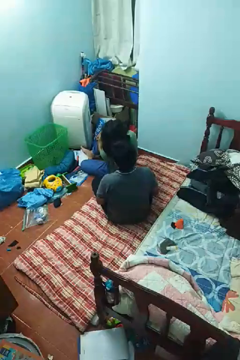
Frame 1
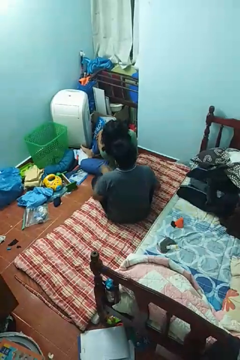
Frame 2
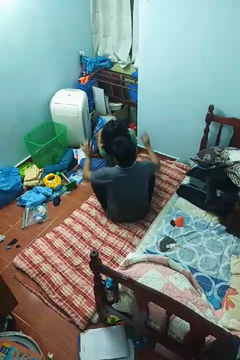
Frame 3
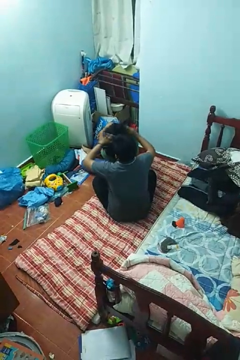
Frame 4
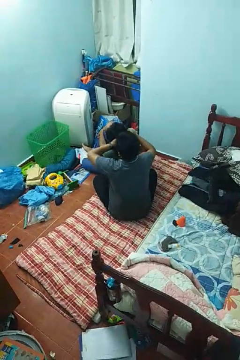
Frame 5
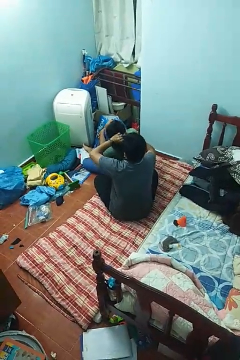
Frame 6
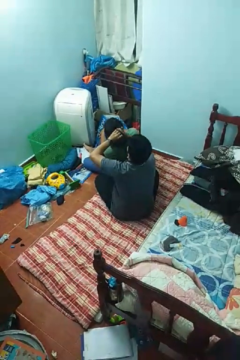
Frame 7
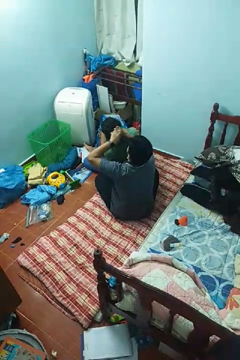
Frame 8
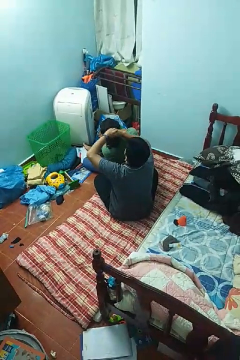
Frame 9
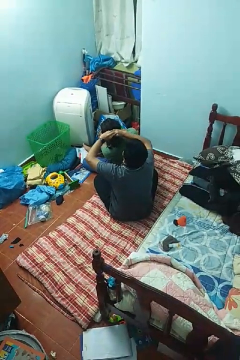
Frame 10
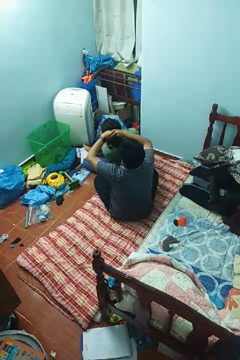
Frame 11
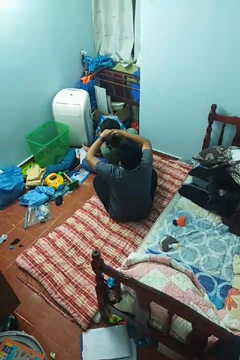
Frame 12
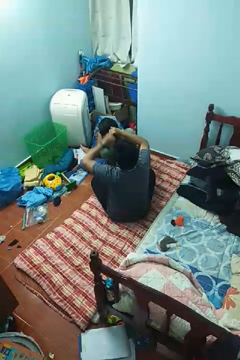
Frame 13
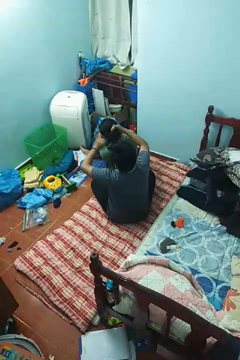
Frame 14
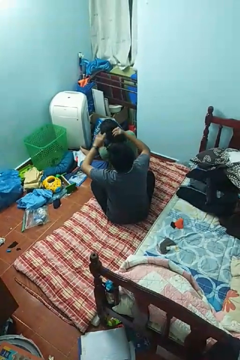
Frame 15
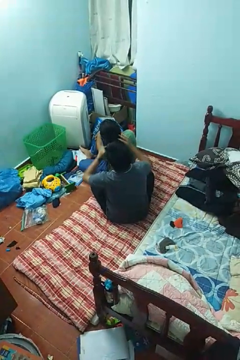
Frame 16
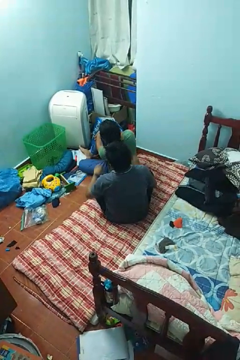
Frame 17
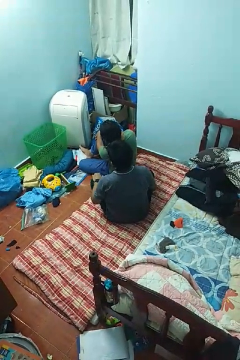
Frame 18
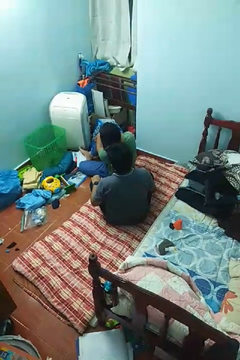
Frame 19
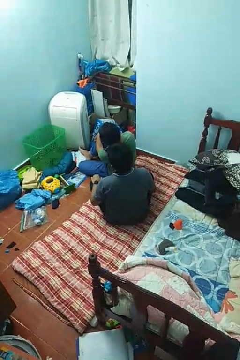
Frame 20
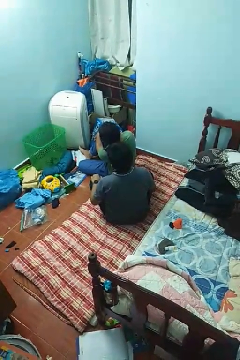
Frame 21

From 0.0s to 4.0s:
person braids hair of person

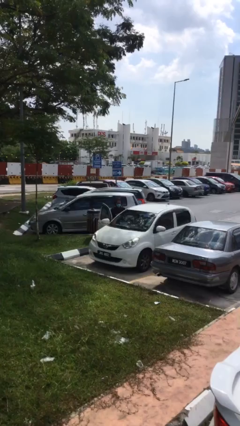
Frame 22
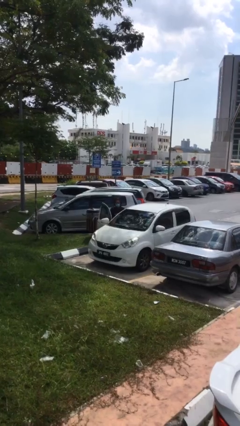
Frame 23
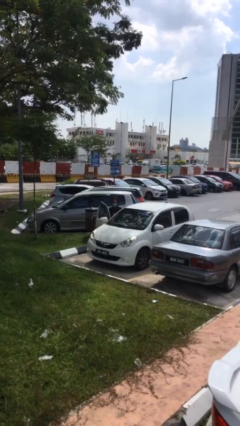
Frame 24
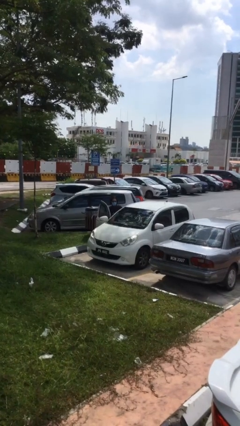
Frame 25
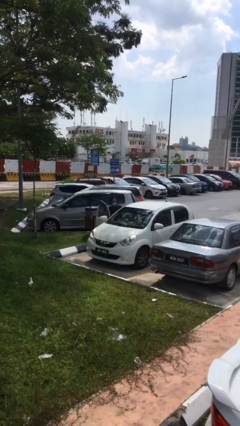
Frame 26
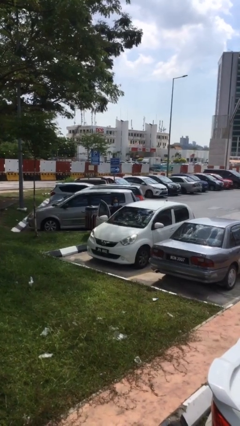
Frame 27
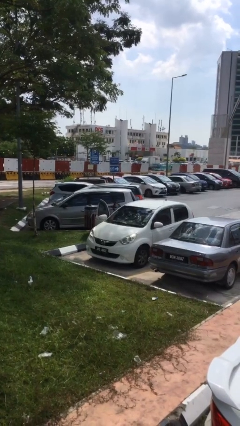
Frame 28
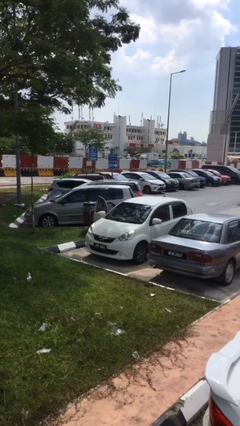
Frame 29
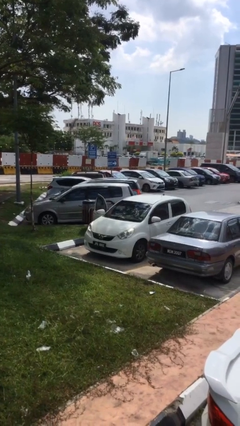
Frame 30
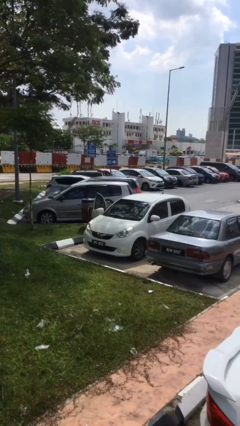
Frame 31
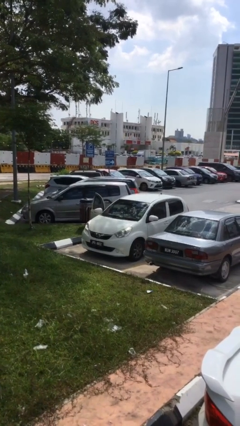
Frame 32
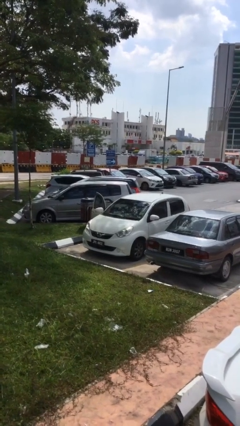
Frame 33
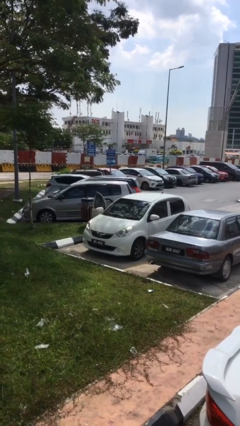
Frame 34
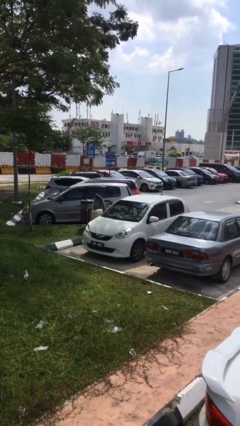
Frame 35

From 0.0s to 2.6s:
person enters car

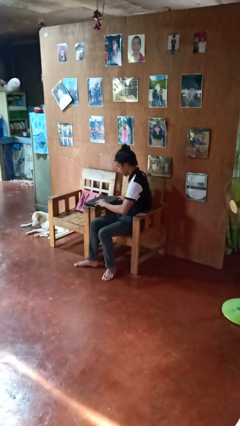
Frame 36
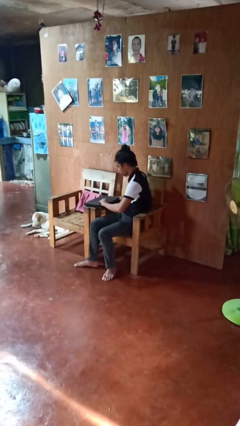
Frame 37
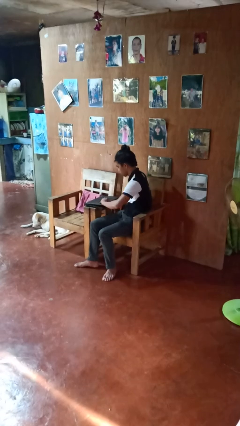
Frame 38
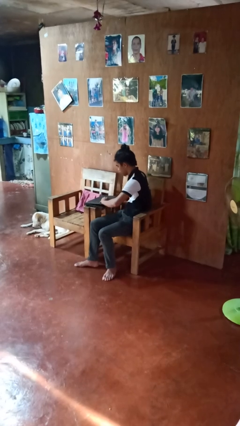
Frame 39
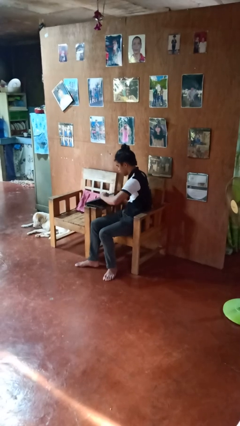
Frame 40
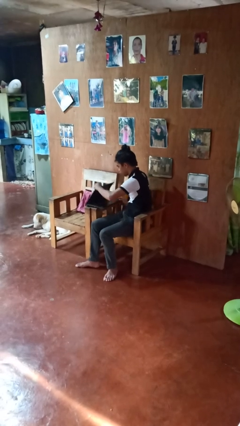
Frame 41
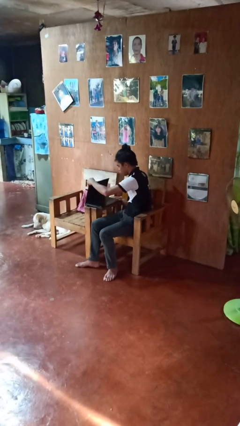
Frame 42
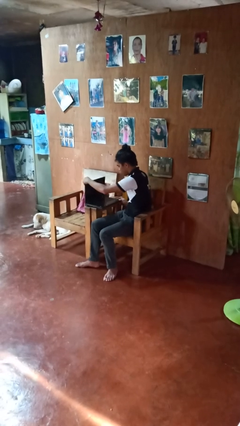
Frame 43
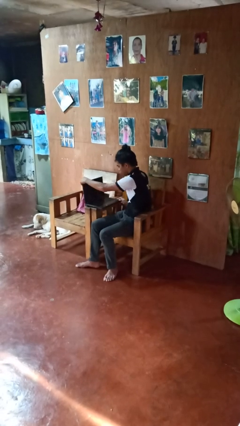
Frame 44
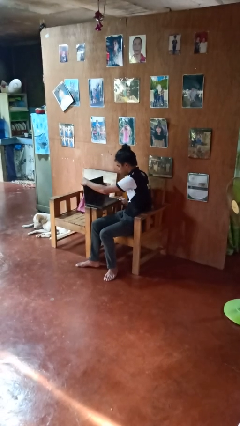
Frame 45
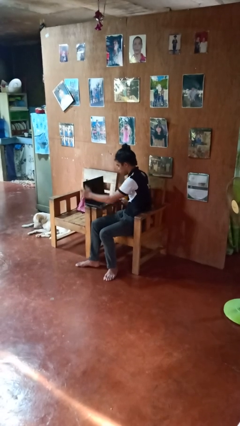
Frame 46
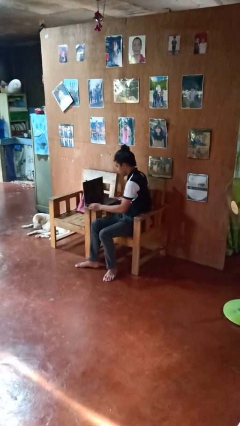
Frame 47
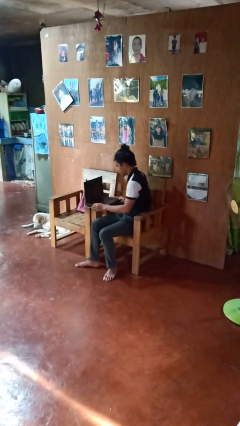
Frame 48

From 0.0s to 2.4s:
person opens laptop

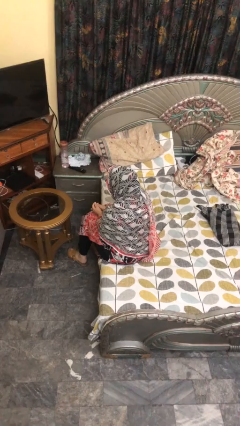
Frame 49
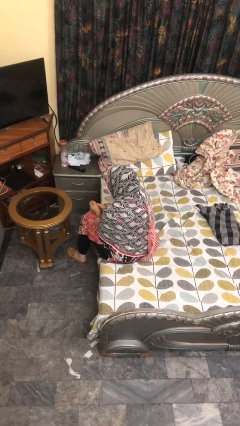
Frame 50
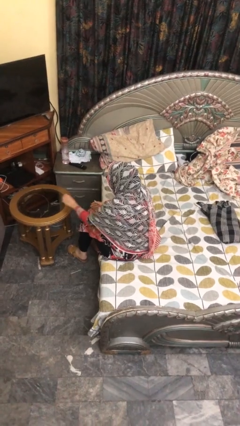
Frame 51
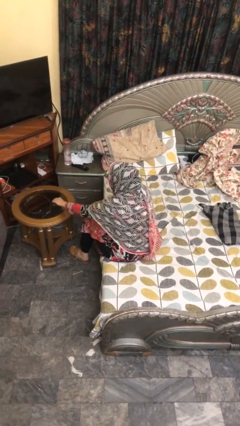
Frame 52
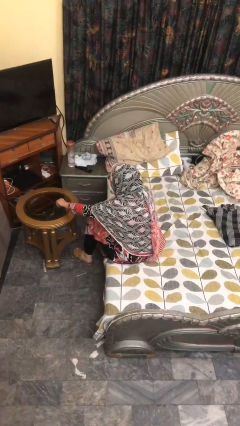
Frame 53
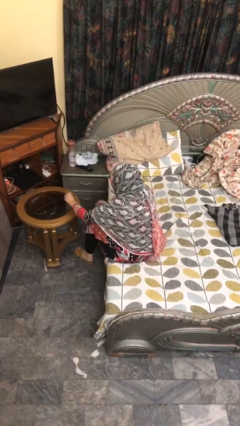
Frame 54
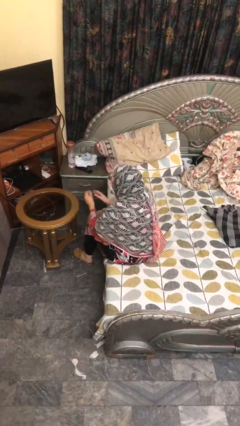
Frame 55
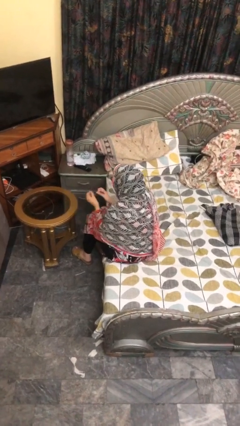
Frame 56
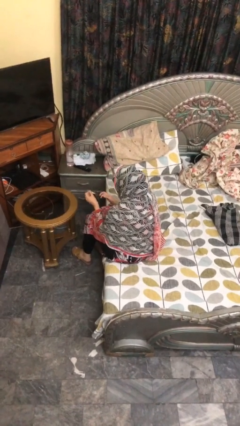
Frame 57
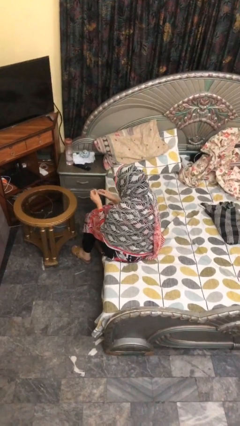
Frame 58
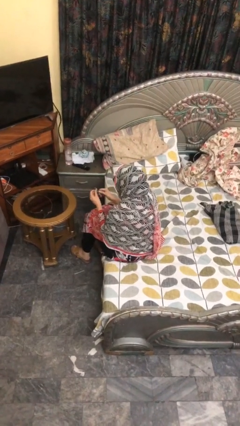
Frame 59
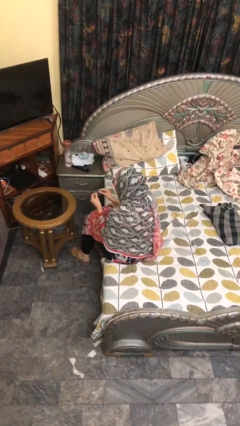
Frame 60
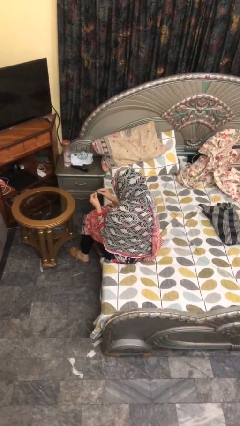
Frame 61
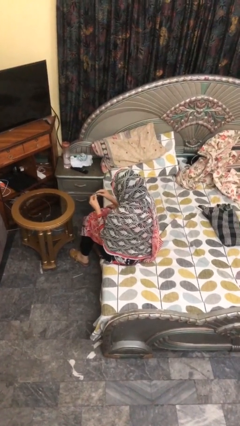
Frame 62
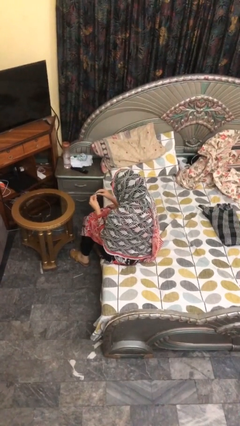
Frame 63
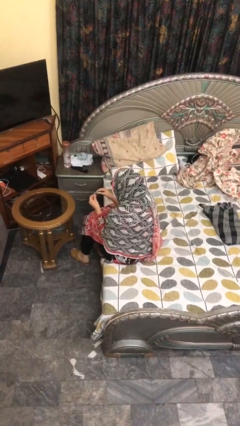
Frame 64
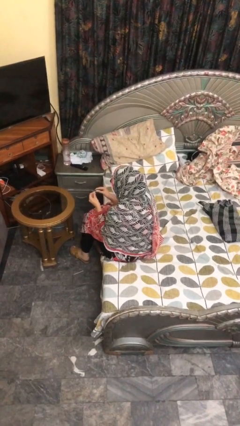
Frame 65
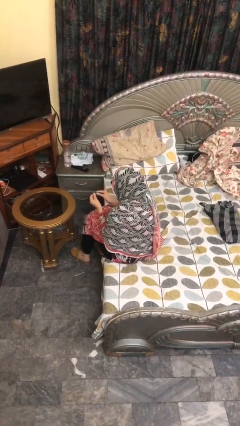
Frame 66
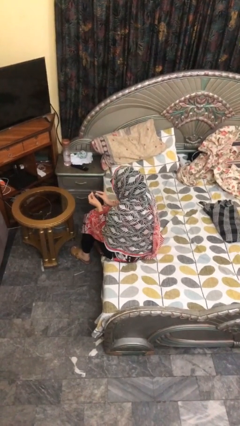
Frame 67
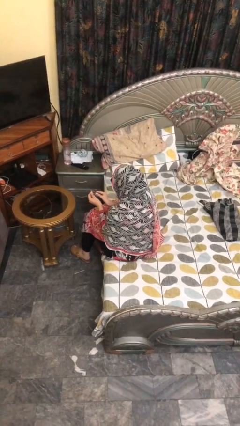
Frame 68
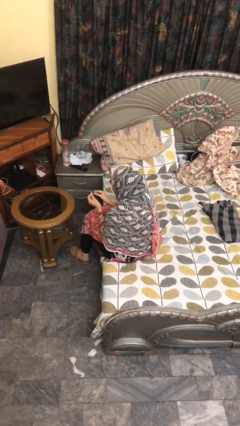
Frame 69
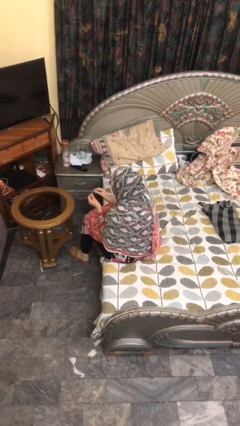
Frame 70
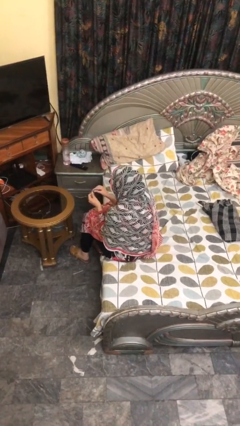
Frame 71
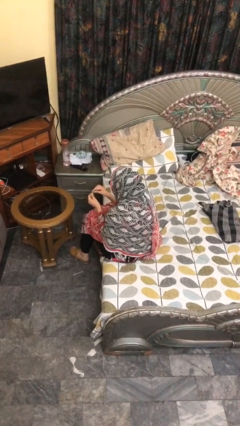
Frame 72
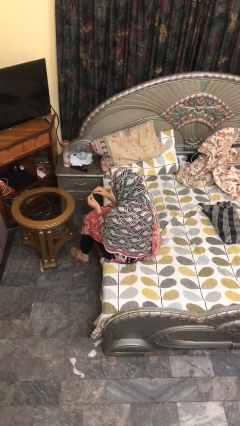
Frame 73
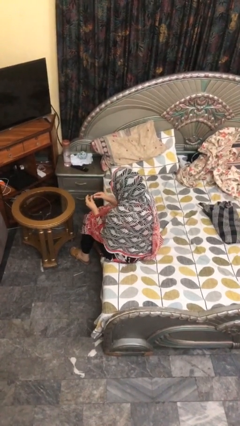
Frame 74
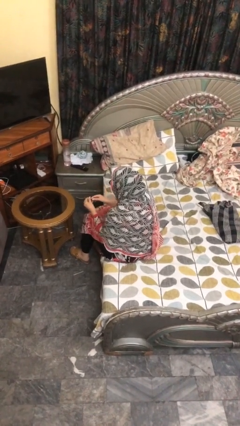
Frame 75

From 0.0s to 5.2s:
person files fingernails

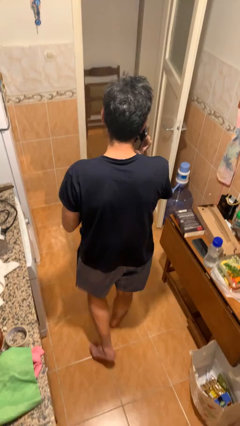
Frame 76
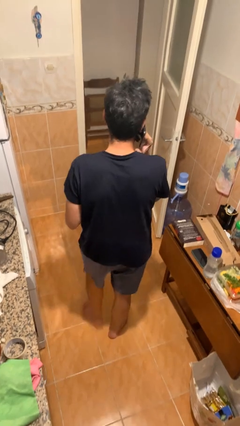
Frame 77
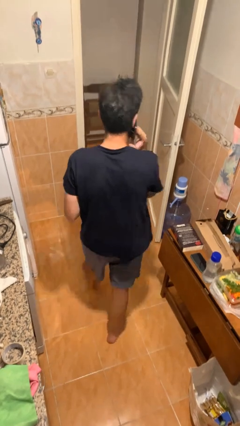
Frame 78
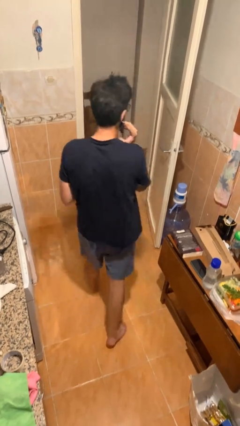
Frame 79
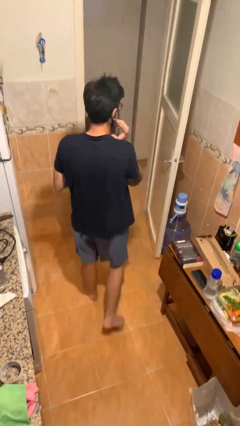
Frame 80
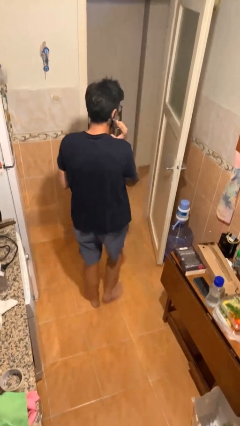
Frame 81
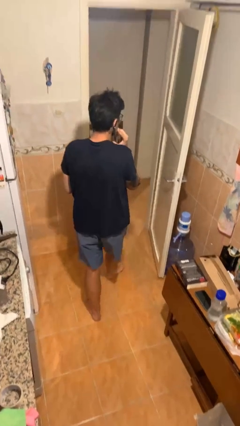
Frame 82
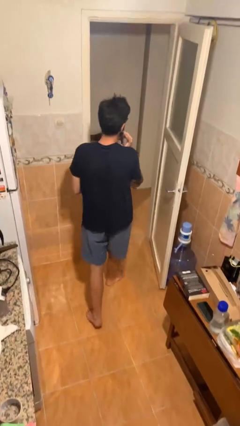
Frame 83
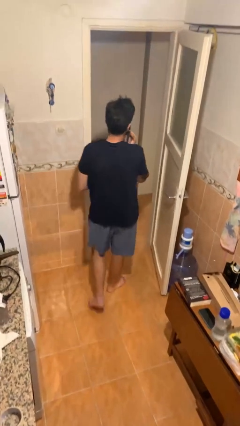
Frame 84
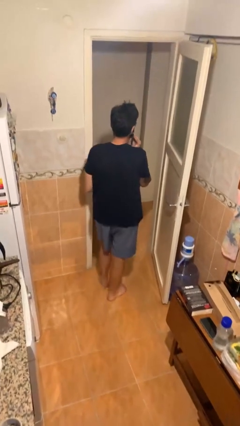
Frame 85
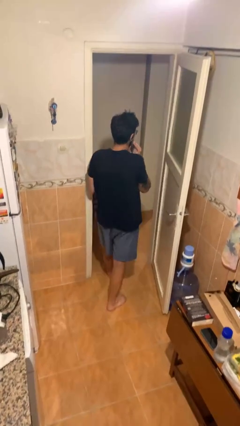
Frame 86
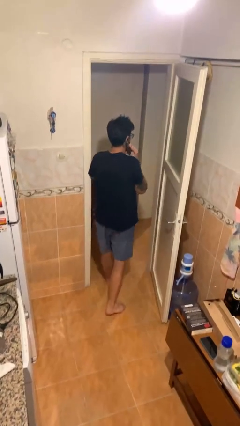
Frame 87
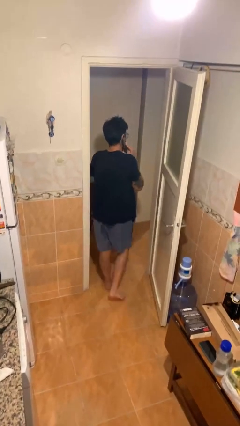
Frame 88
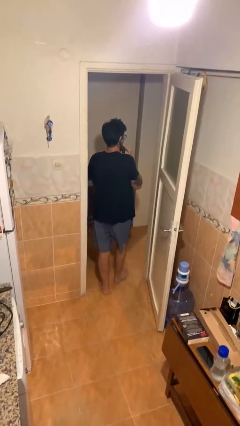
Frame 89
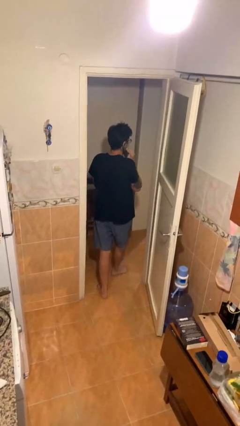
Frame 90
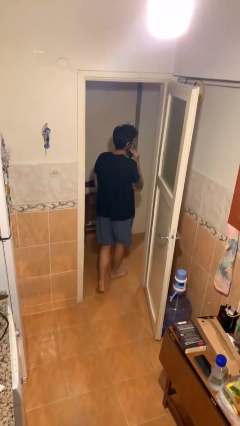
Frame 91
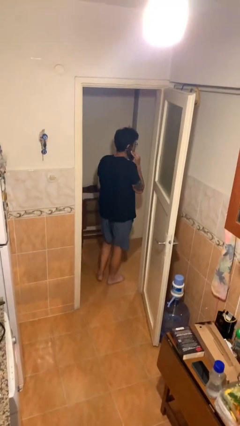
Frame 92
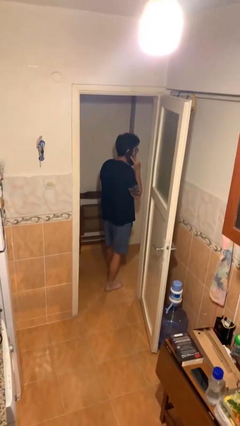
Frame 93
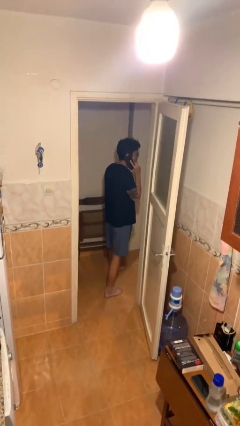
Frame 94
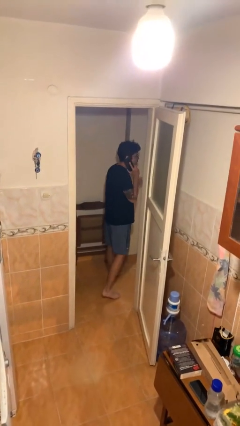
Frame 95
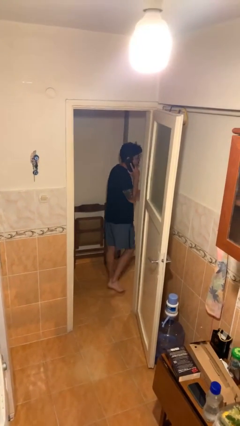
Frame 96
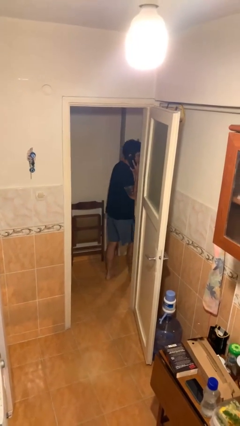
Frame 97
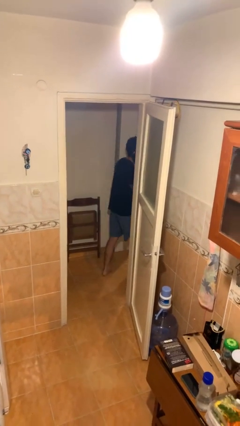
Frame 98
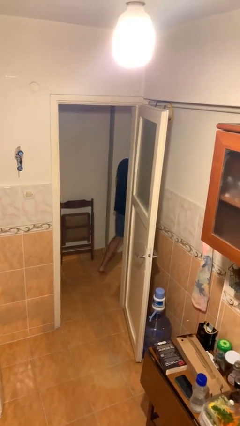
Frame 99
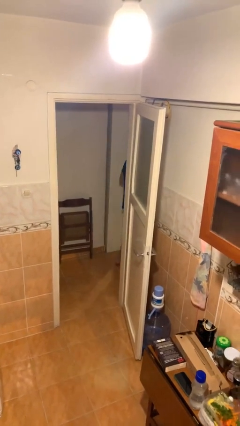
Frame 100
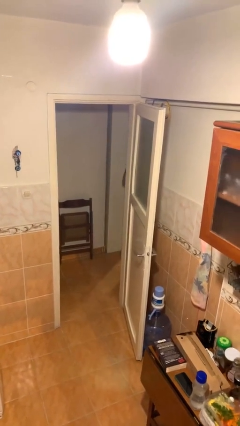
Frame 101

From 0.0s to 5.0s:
person exits scene through structure
